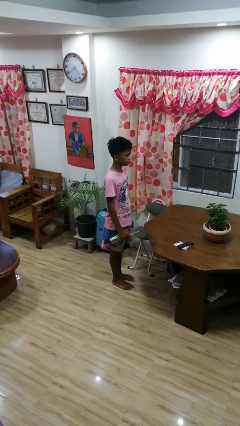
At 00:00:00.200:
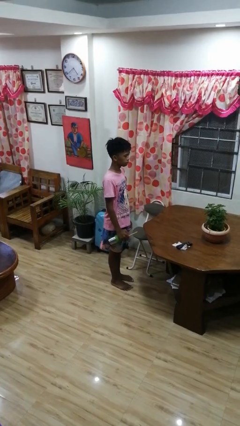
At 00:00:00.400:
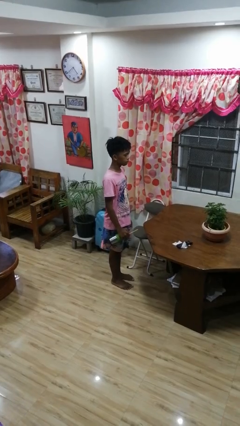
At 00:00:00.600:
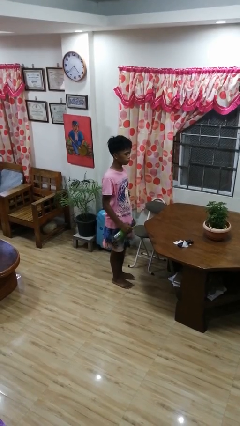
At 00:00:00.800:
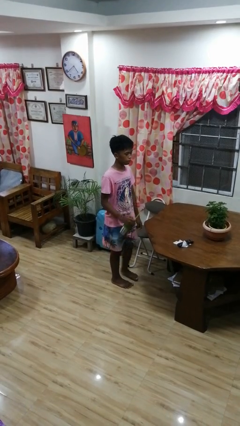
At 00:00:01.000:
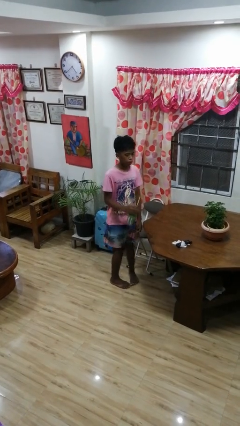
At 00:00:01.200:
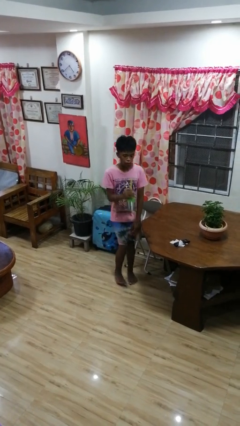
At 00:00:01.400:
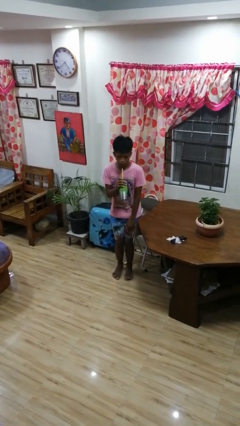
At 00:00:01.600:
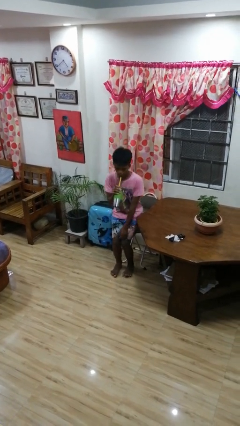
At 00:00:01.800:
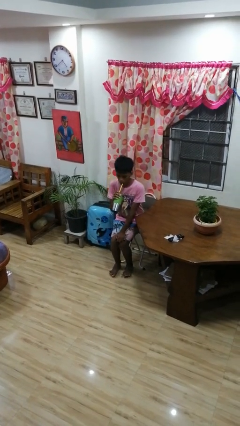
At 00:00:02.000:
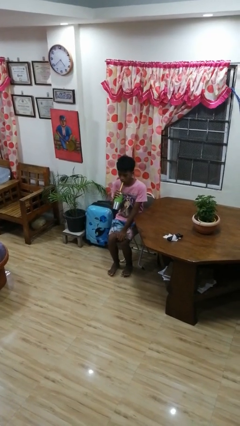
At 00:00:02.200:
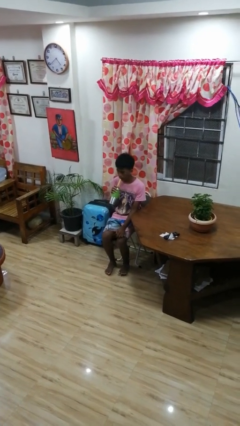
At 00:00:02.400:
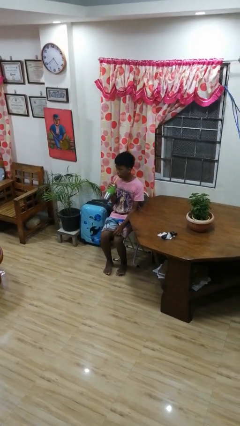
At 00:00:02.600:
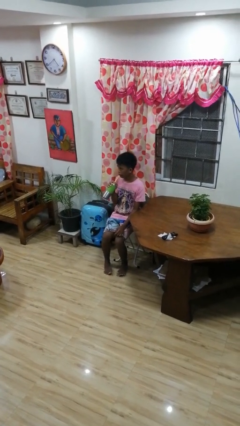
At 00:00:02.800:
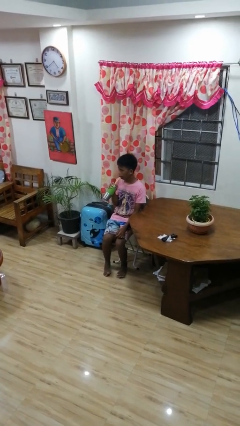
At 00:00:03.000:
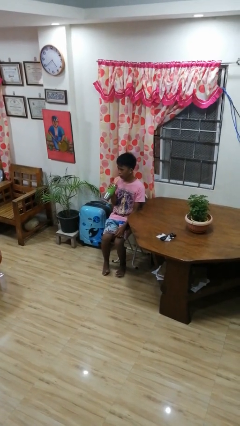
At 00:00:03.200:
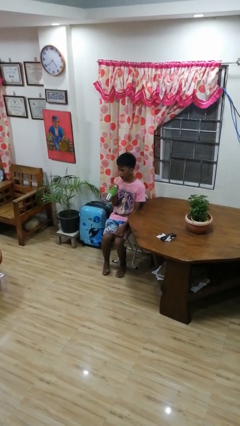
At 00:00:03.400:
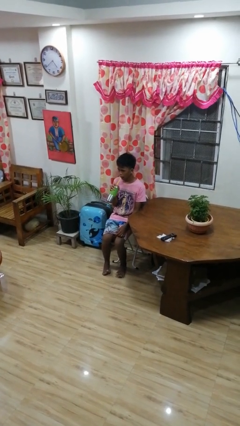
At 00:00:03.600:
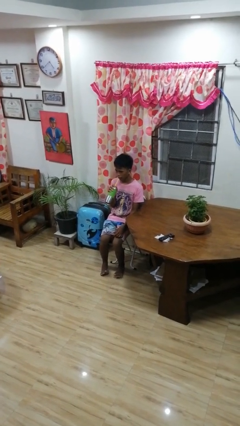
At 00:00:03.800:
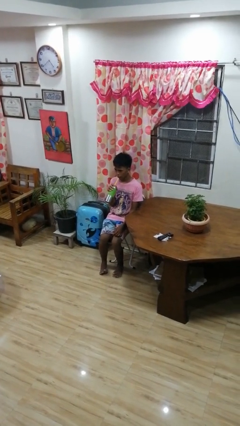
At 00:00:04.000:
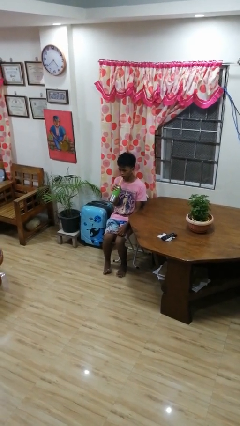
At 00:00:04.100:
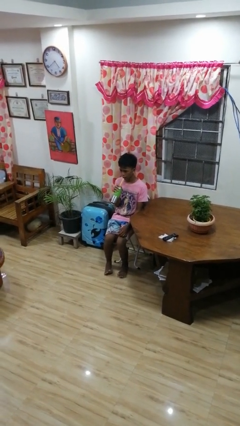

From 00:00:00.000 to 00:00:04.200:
person drinks from straw

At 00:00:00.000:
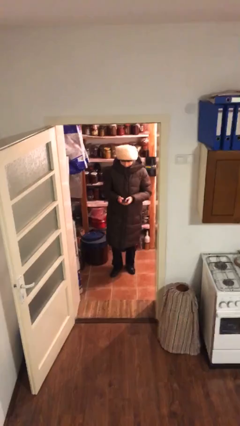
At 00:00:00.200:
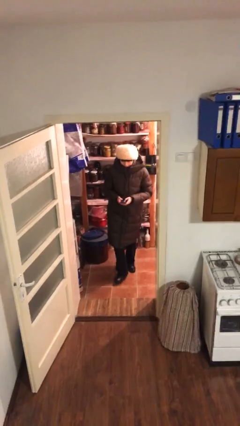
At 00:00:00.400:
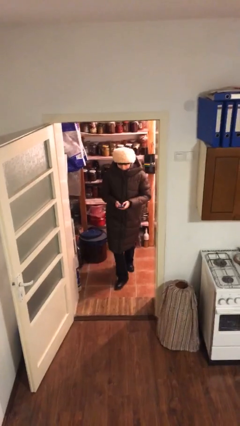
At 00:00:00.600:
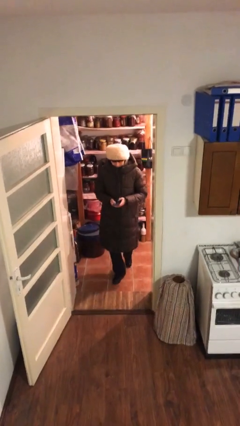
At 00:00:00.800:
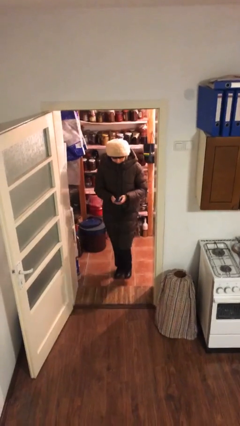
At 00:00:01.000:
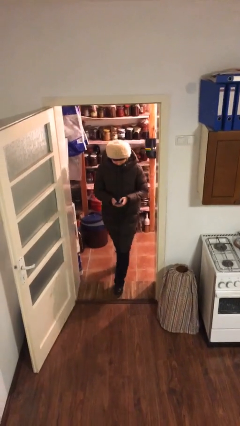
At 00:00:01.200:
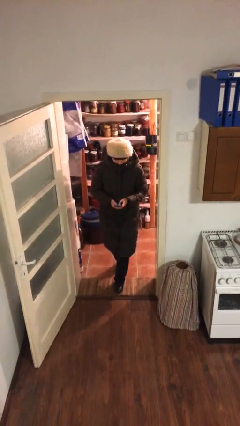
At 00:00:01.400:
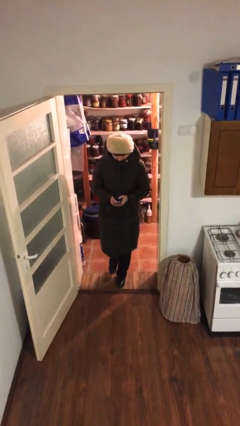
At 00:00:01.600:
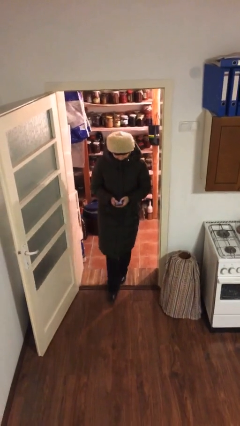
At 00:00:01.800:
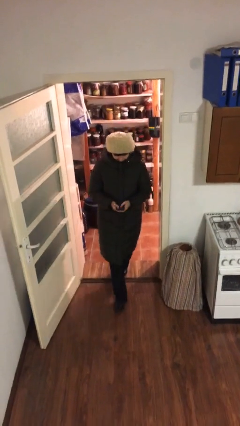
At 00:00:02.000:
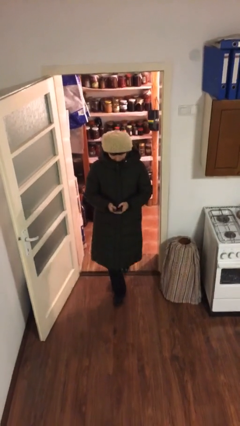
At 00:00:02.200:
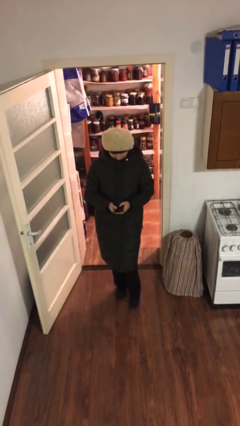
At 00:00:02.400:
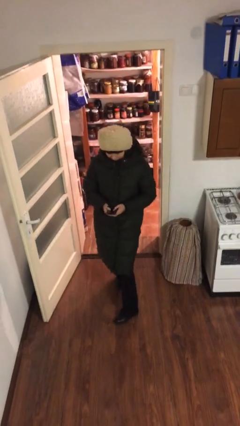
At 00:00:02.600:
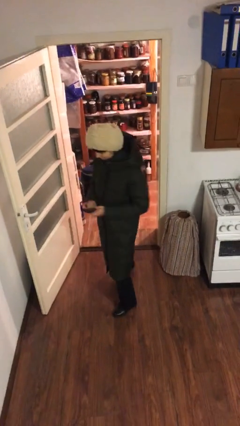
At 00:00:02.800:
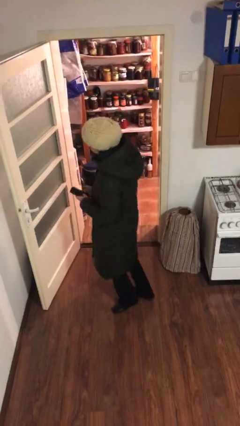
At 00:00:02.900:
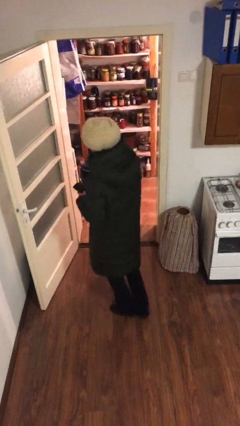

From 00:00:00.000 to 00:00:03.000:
person enters scene through structure

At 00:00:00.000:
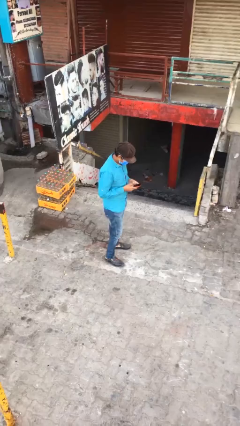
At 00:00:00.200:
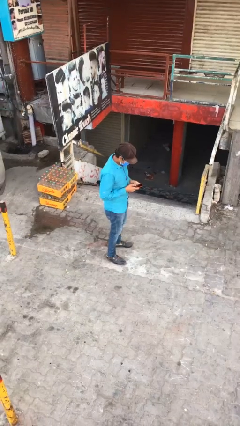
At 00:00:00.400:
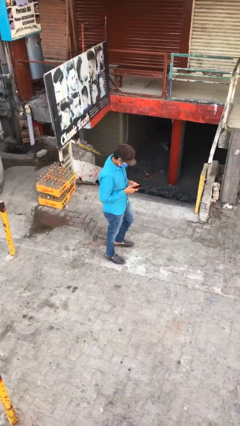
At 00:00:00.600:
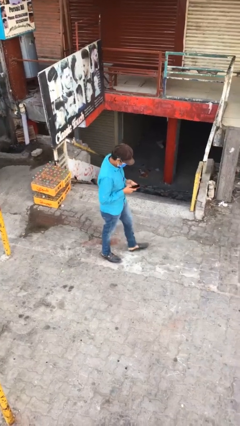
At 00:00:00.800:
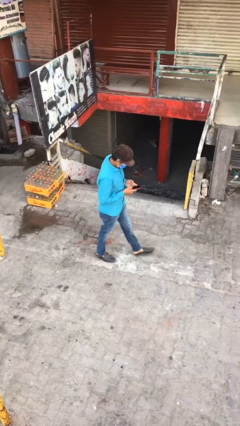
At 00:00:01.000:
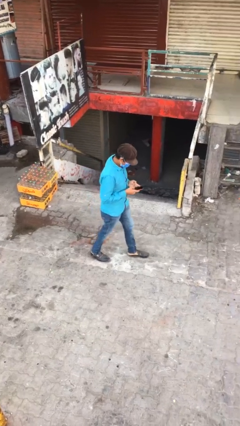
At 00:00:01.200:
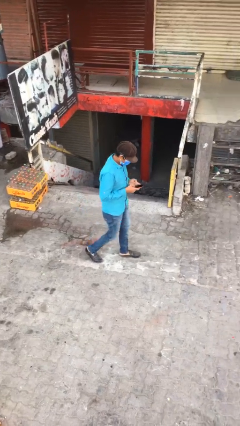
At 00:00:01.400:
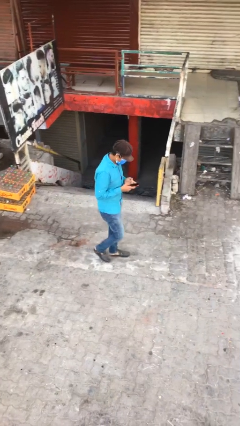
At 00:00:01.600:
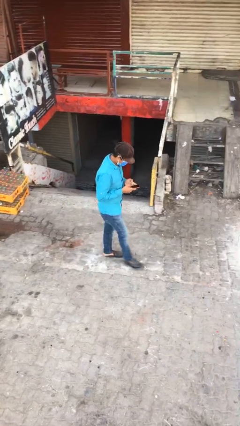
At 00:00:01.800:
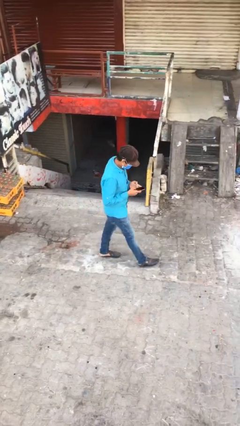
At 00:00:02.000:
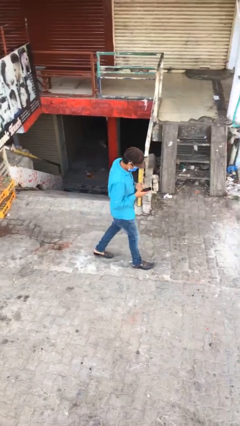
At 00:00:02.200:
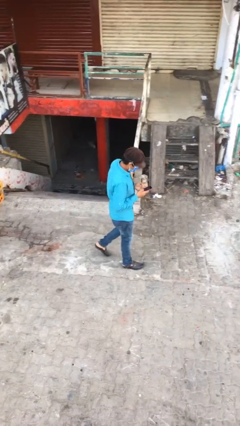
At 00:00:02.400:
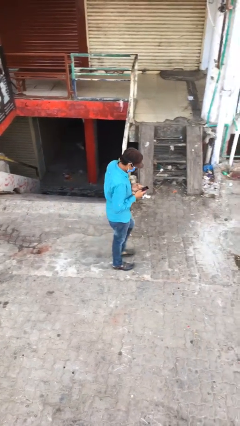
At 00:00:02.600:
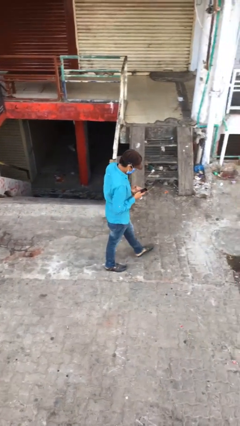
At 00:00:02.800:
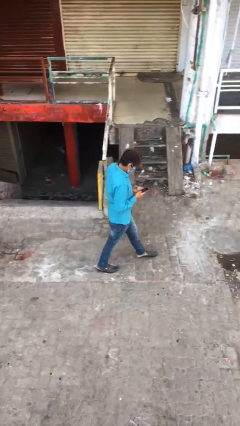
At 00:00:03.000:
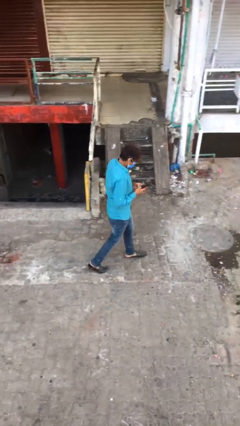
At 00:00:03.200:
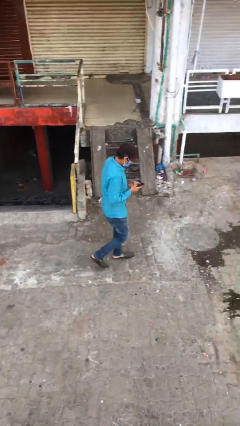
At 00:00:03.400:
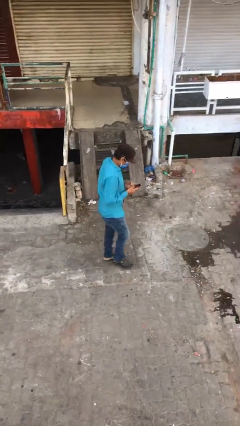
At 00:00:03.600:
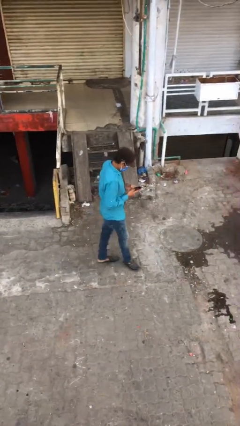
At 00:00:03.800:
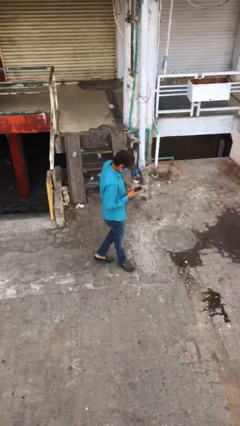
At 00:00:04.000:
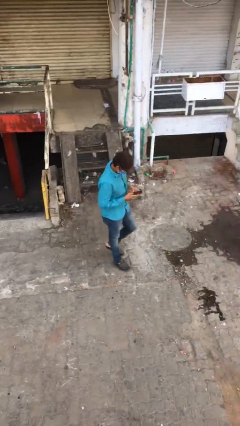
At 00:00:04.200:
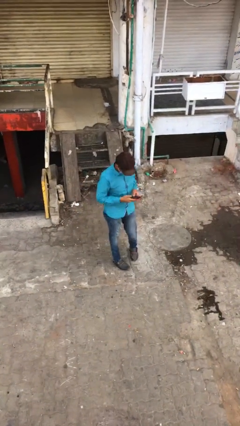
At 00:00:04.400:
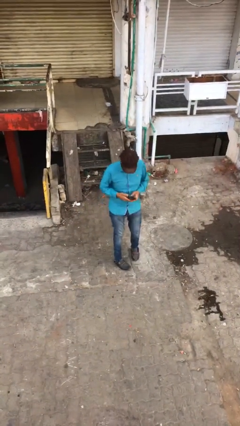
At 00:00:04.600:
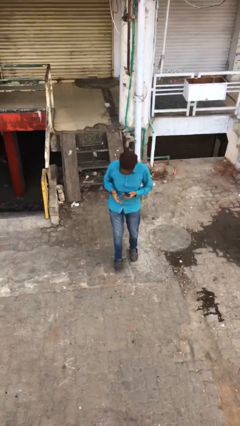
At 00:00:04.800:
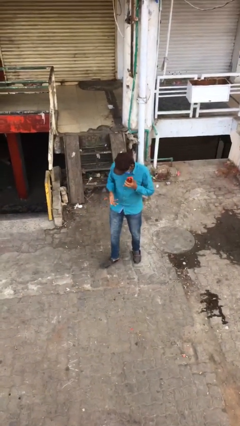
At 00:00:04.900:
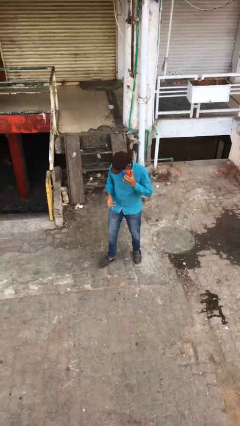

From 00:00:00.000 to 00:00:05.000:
person texts on phone

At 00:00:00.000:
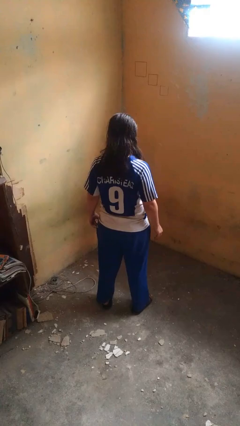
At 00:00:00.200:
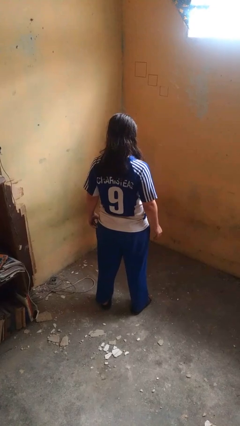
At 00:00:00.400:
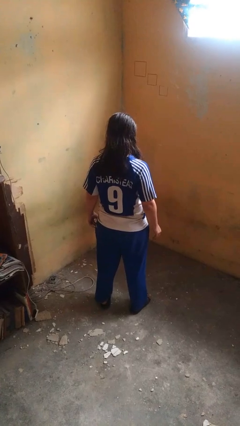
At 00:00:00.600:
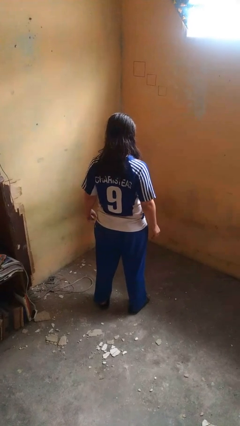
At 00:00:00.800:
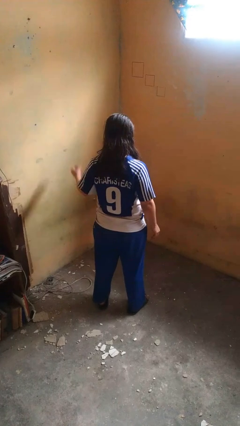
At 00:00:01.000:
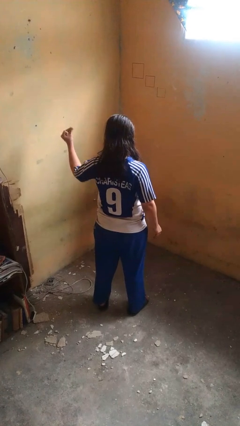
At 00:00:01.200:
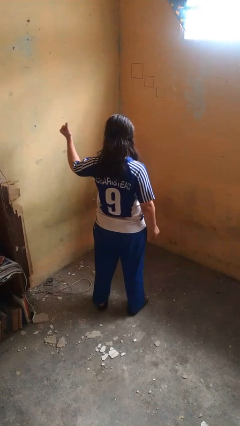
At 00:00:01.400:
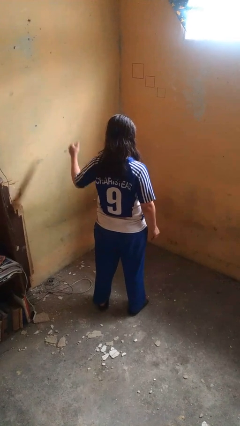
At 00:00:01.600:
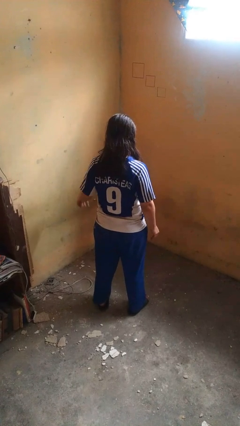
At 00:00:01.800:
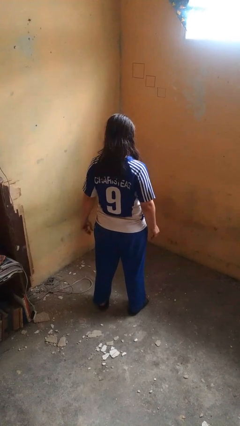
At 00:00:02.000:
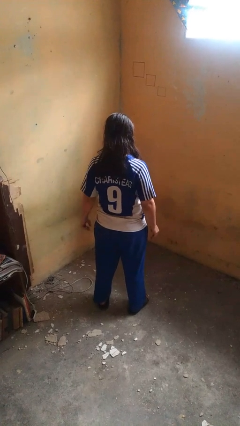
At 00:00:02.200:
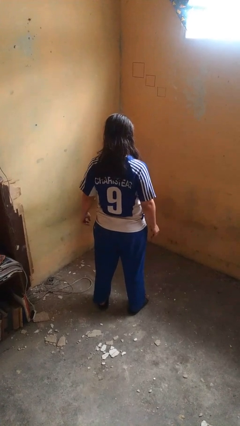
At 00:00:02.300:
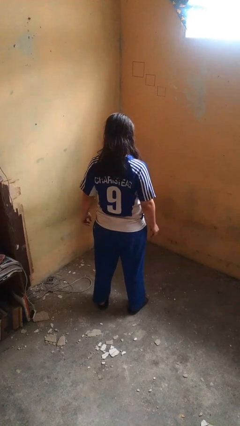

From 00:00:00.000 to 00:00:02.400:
person snaps fingers

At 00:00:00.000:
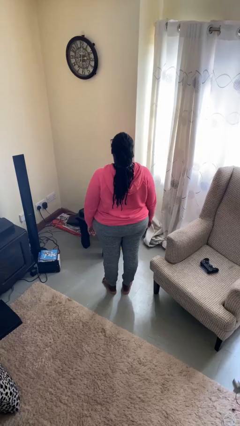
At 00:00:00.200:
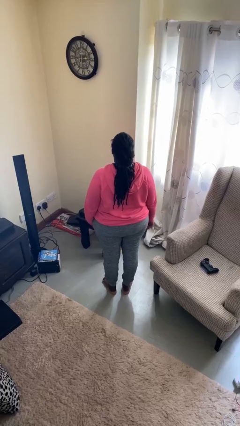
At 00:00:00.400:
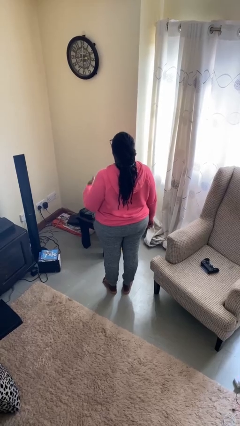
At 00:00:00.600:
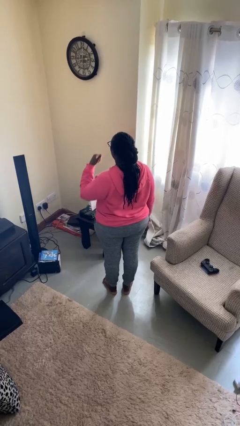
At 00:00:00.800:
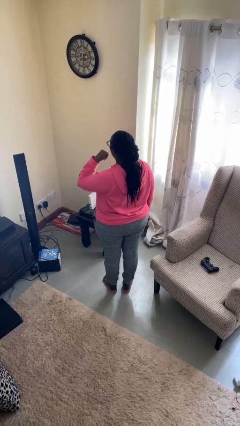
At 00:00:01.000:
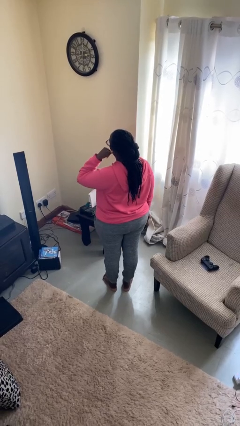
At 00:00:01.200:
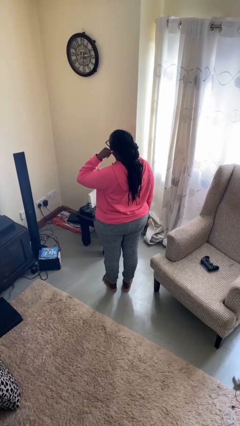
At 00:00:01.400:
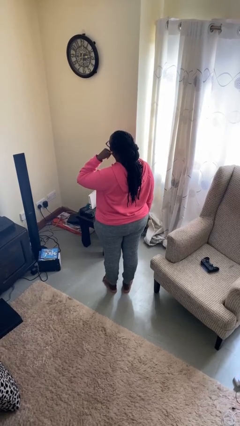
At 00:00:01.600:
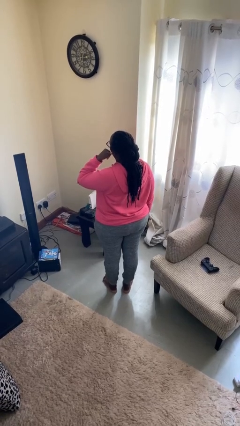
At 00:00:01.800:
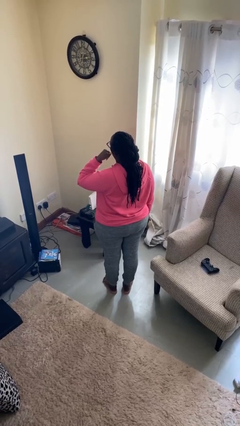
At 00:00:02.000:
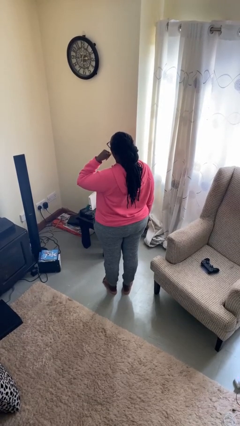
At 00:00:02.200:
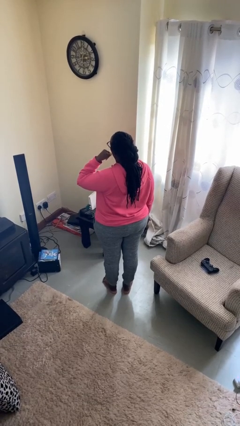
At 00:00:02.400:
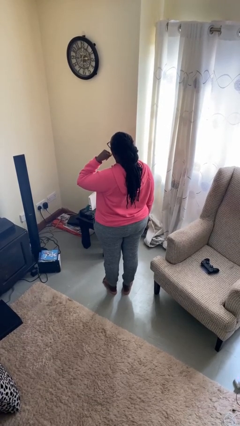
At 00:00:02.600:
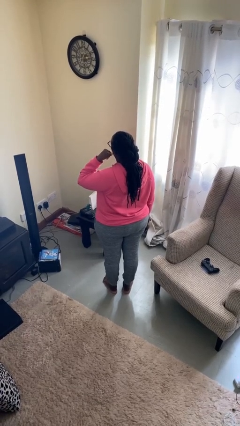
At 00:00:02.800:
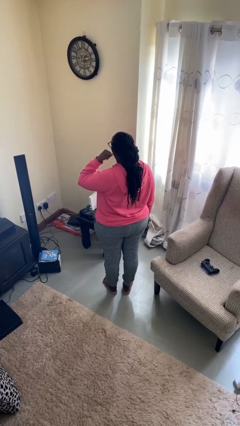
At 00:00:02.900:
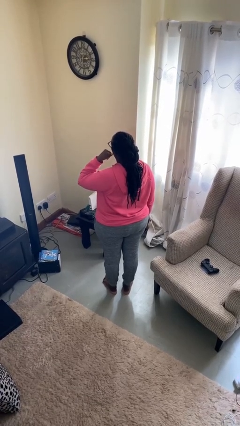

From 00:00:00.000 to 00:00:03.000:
person gestures call me
